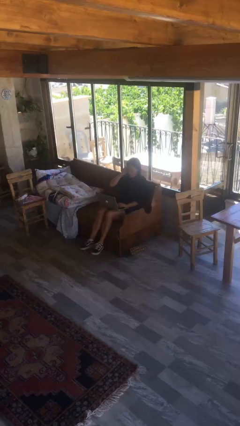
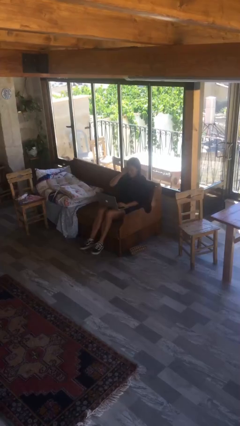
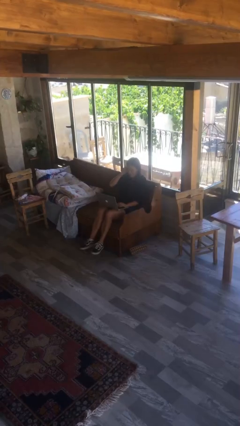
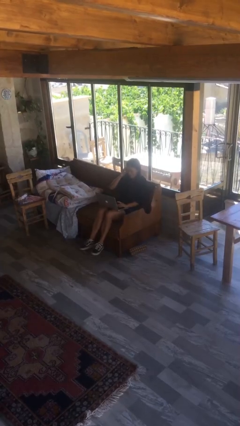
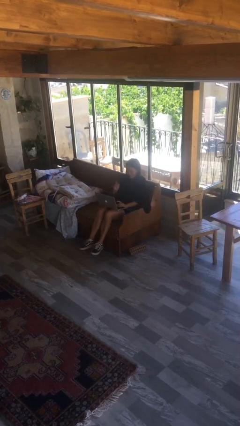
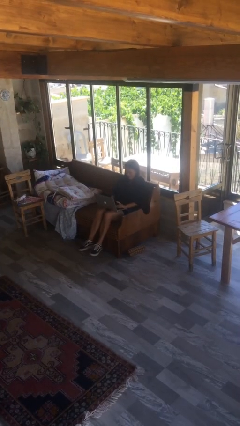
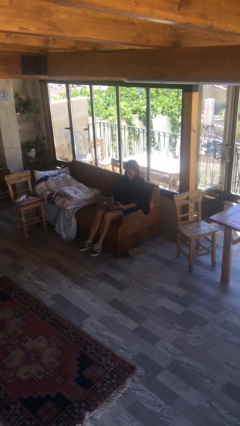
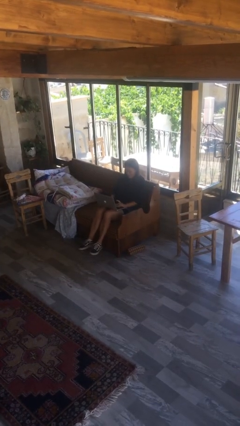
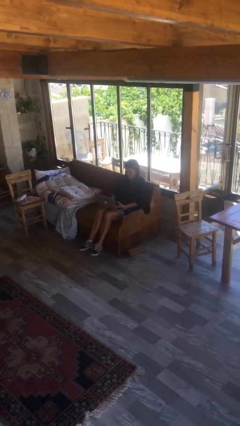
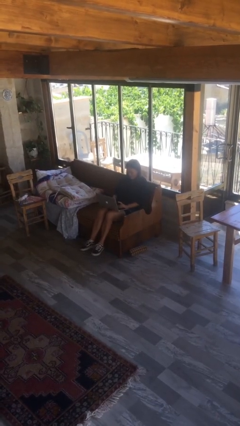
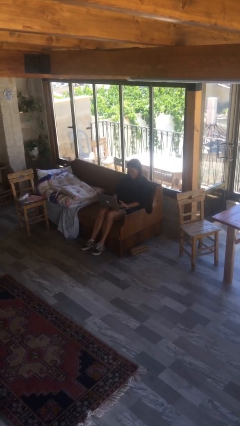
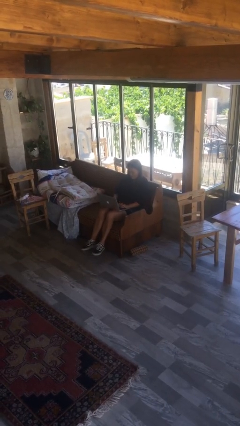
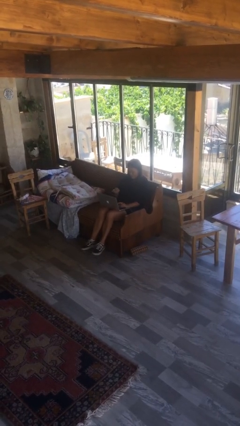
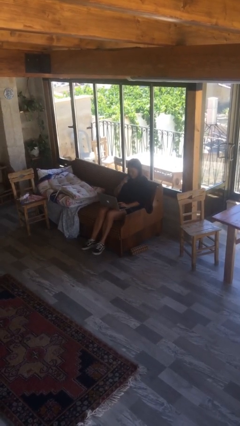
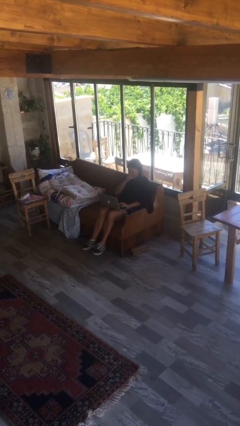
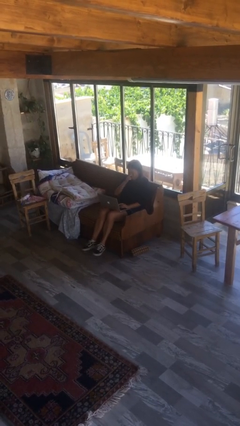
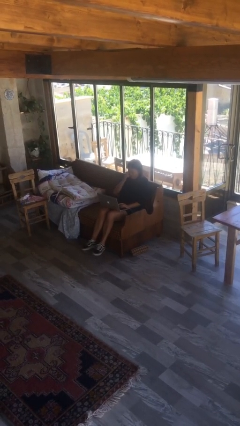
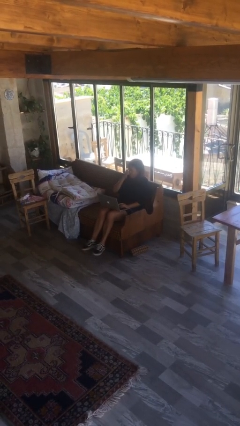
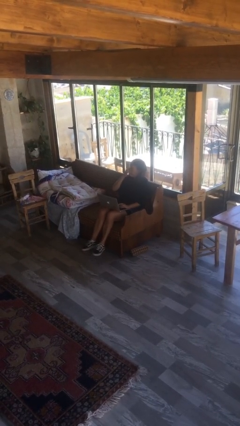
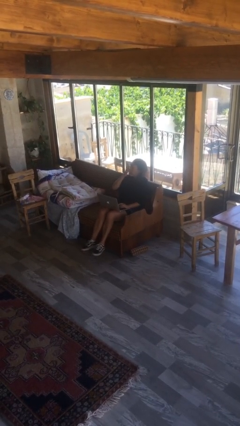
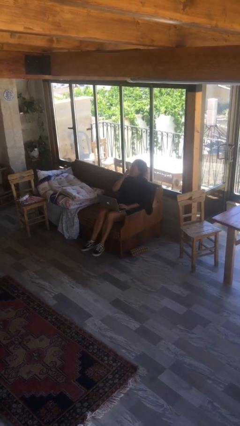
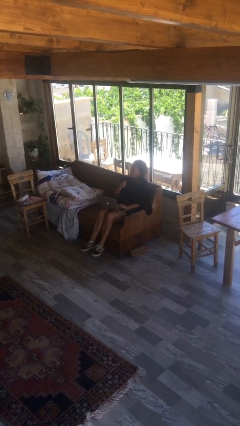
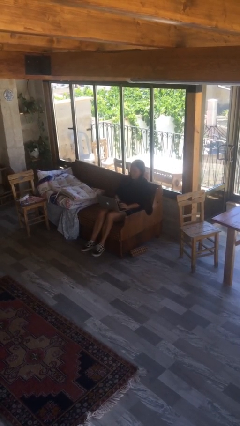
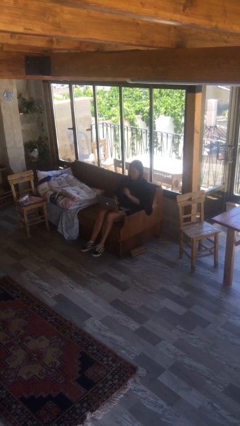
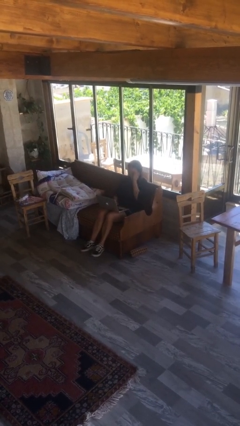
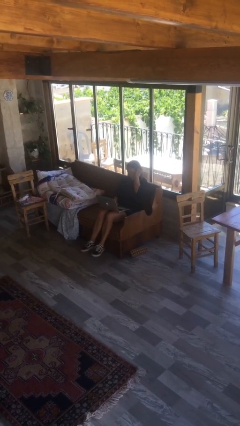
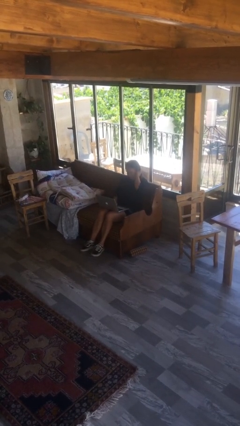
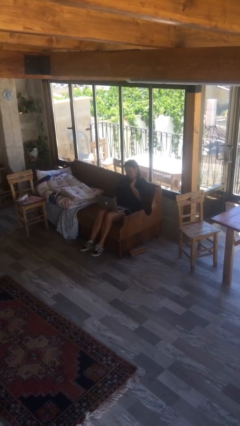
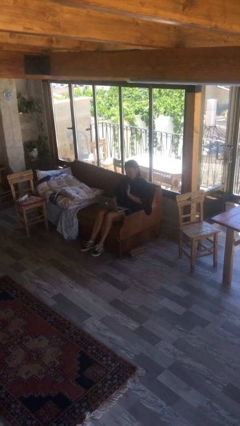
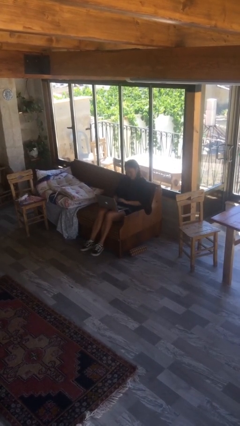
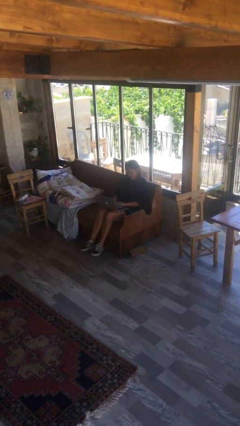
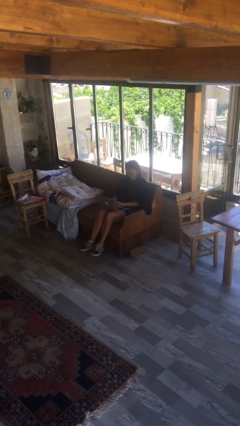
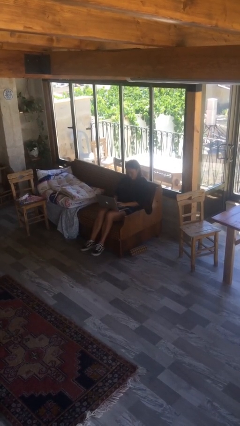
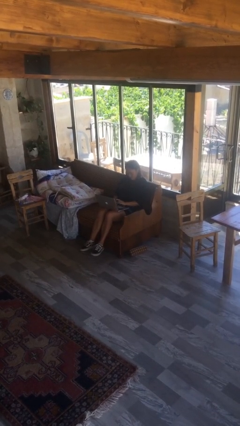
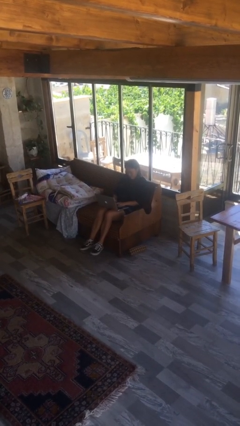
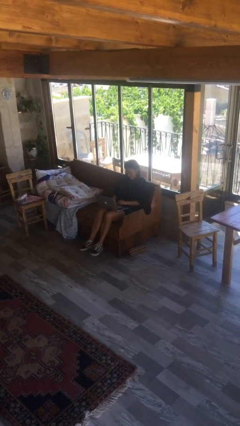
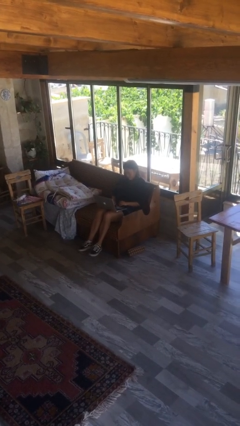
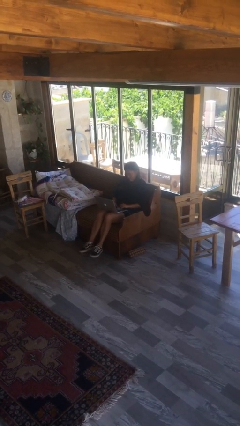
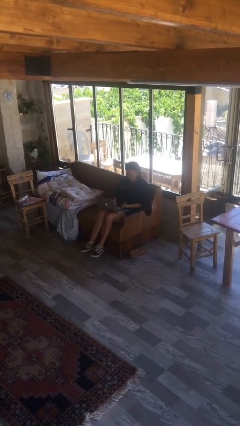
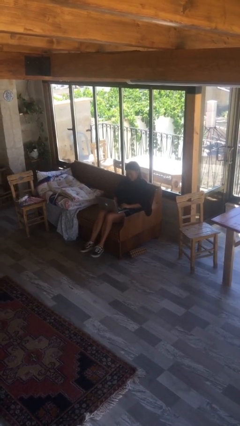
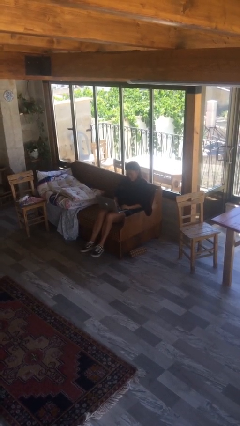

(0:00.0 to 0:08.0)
person interacts with laptop

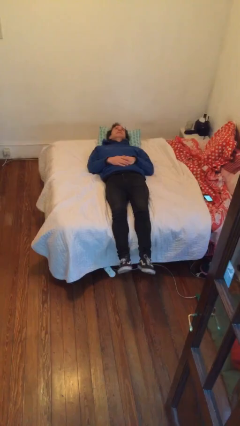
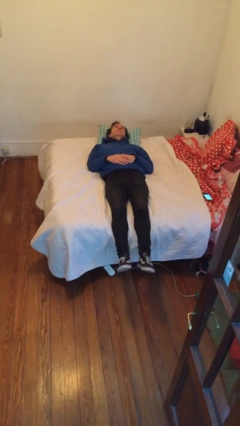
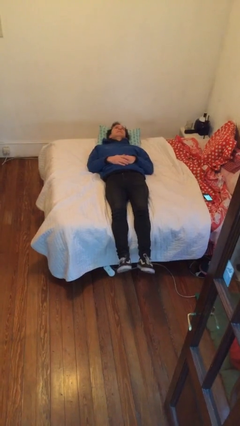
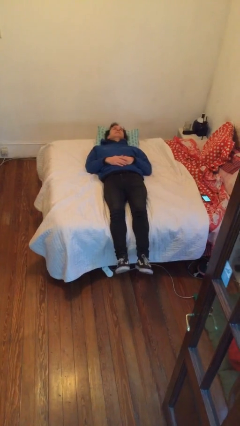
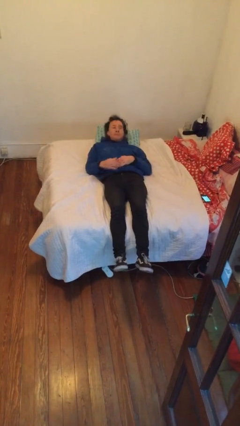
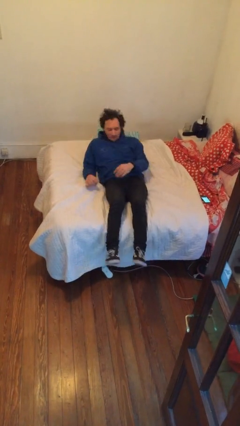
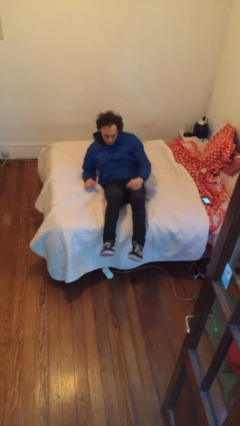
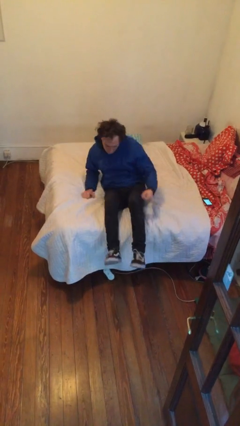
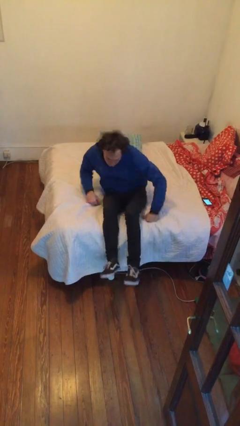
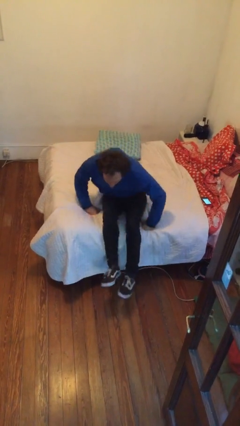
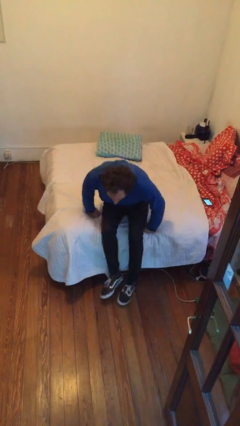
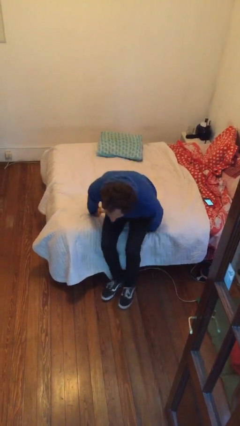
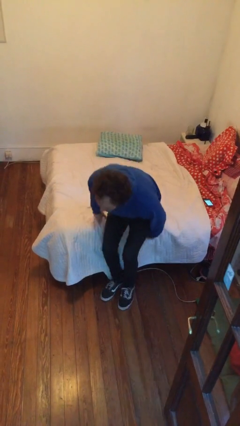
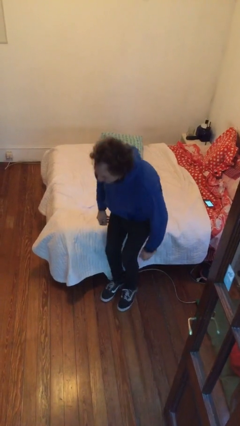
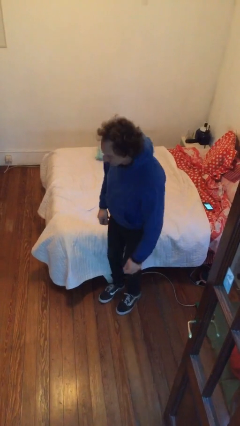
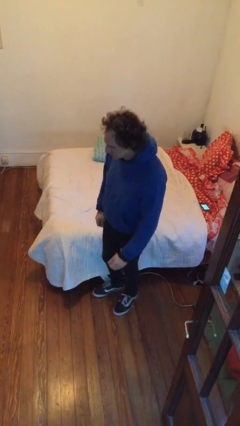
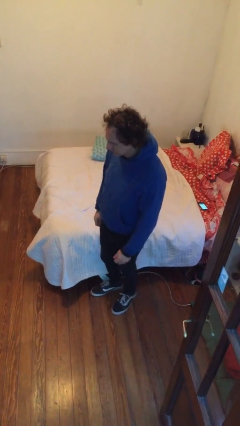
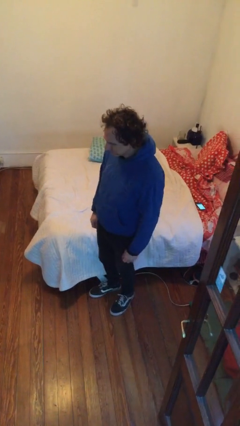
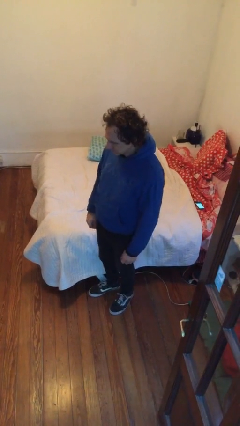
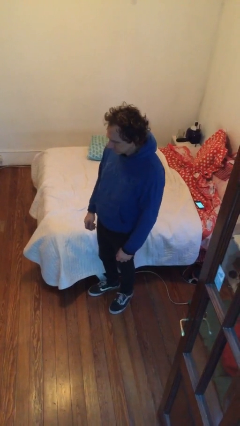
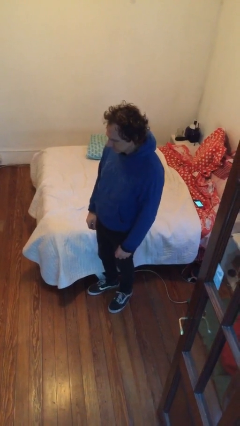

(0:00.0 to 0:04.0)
person stands up

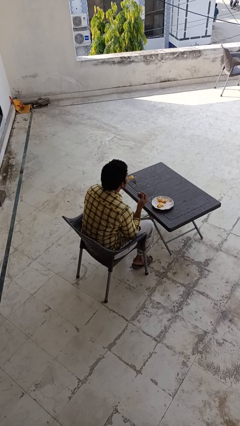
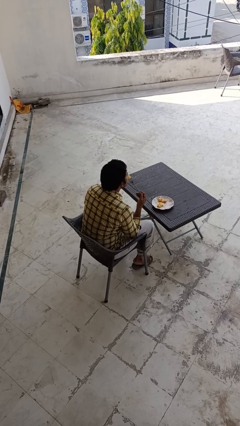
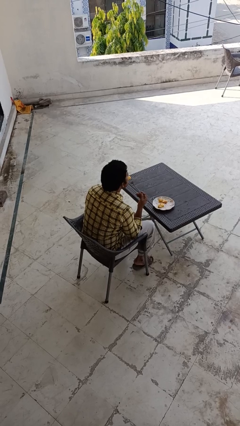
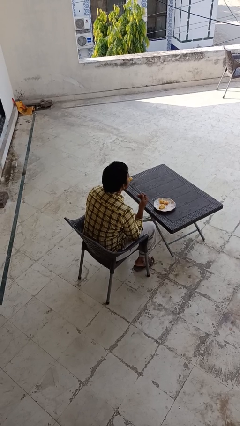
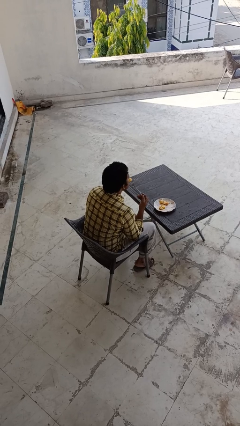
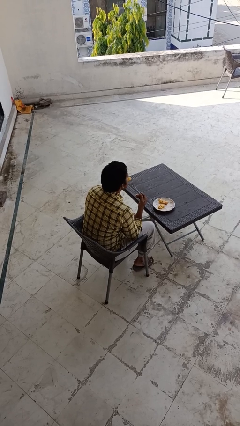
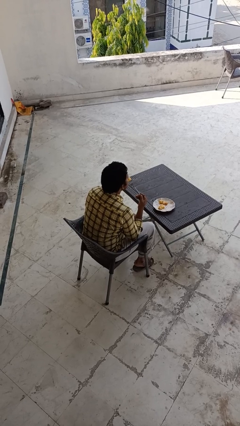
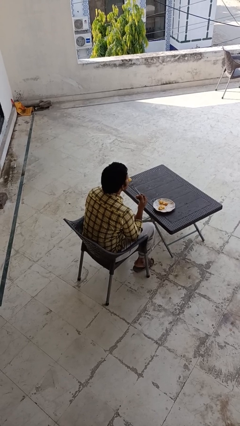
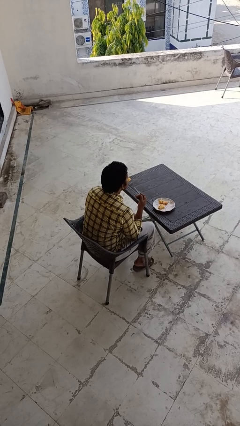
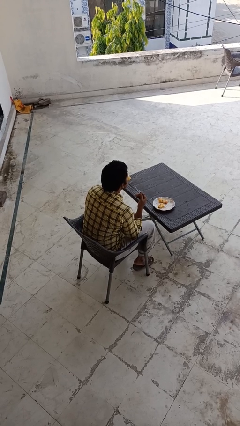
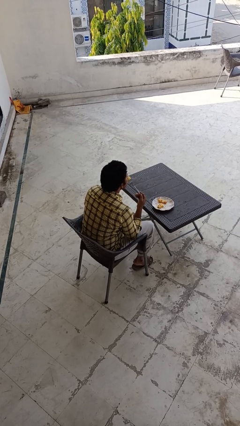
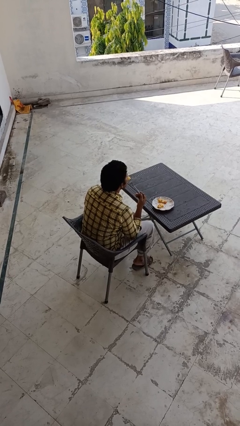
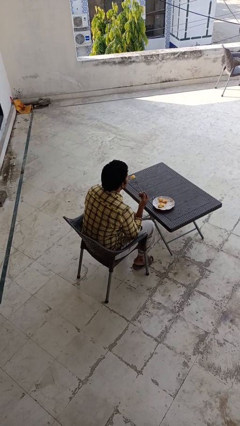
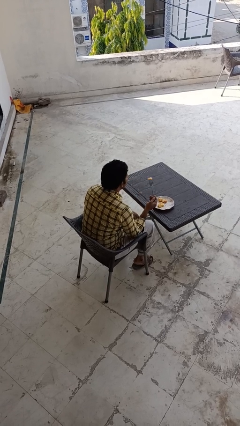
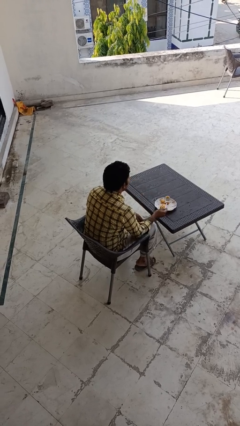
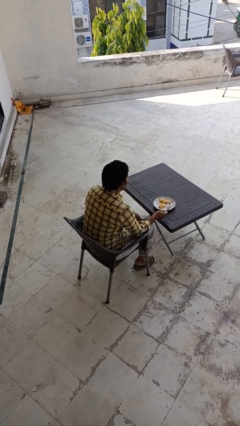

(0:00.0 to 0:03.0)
person eats with utensil

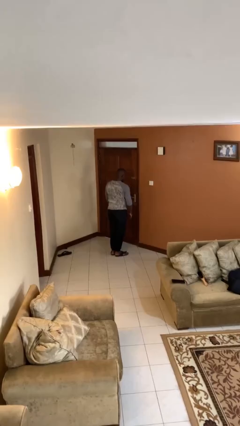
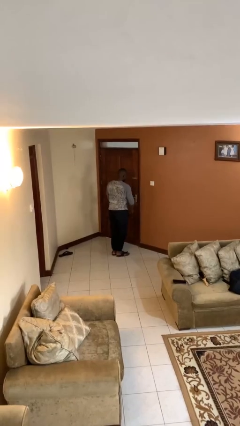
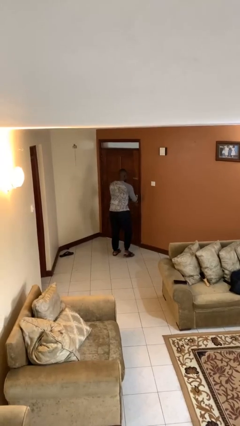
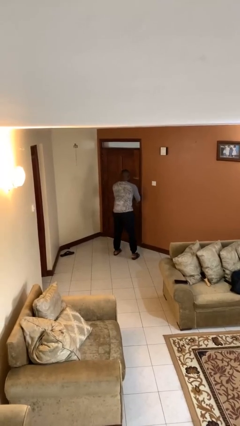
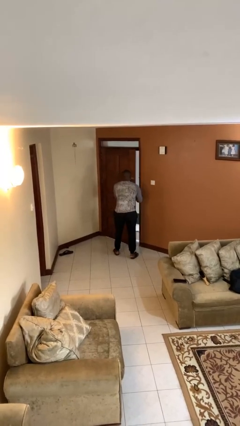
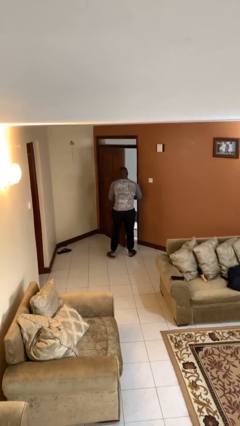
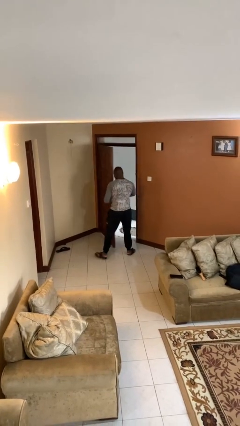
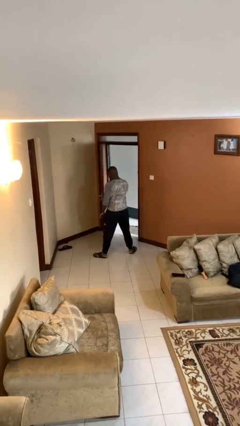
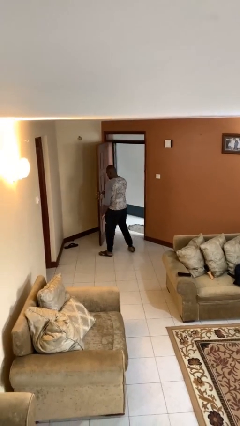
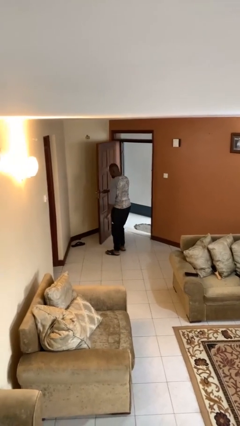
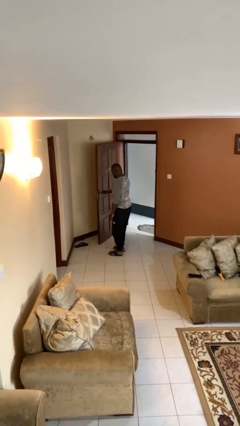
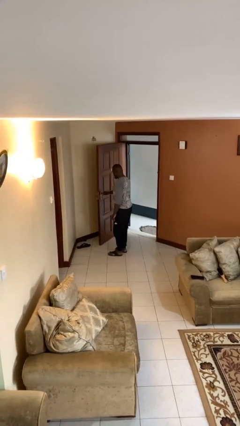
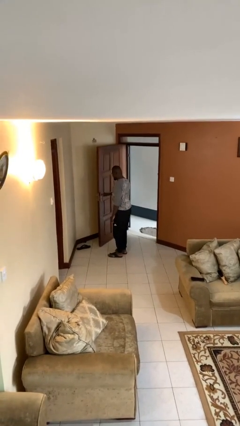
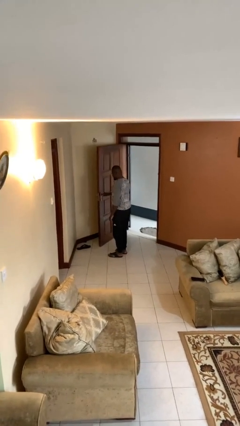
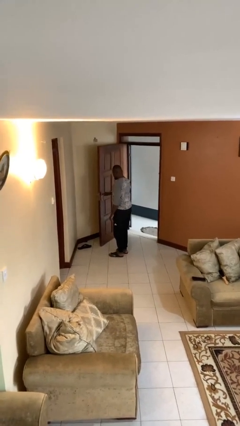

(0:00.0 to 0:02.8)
person opens facility door
